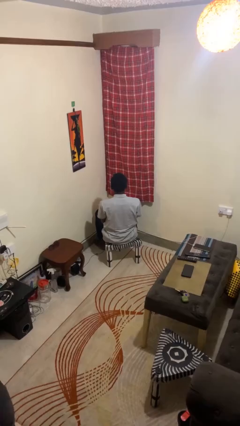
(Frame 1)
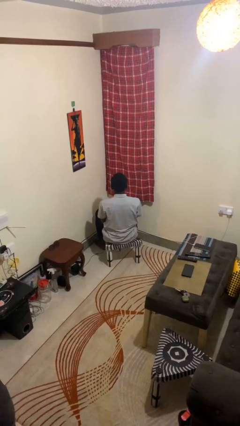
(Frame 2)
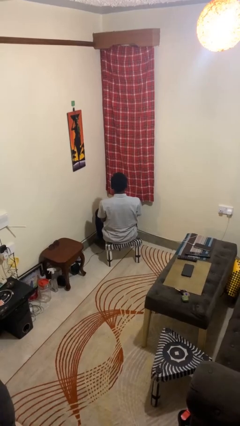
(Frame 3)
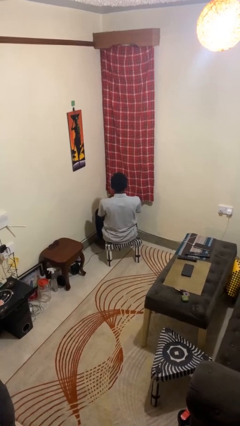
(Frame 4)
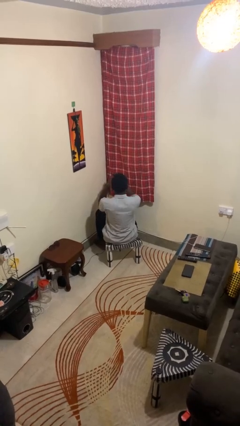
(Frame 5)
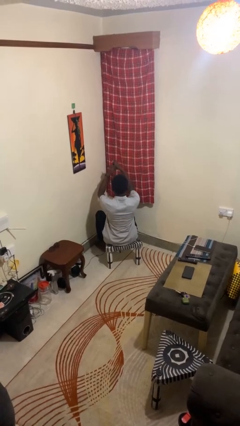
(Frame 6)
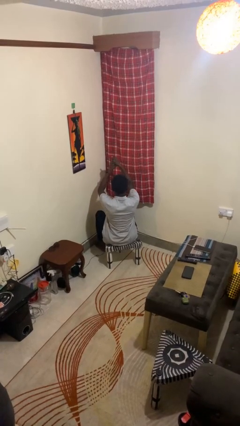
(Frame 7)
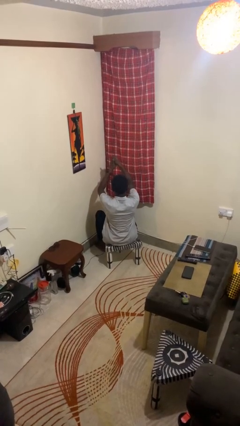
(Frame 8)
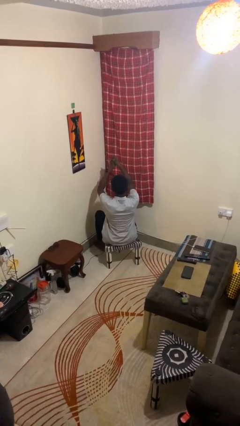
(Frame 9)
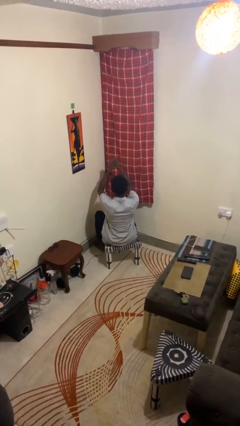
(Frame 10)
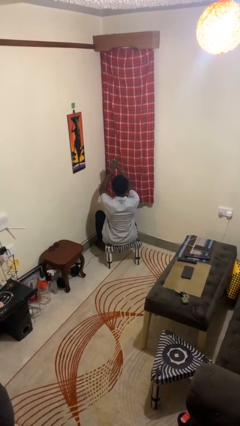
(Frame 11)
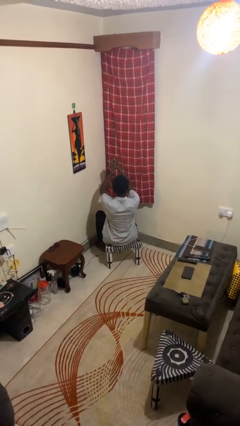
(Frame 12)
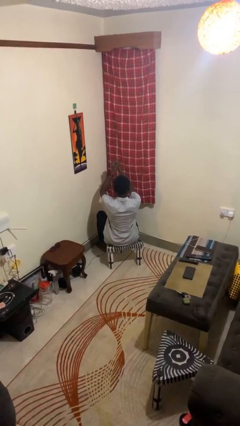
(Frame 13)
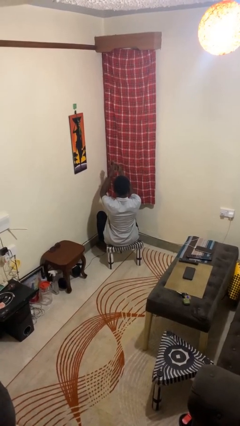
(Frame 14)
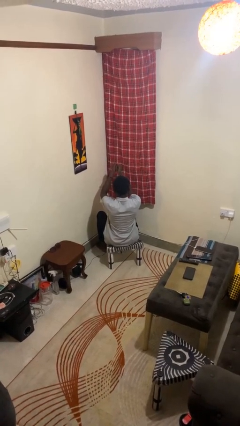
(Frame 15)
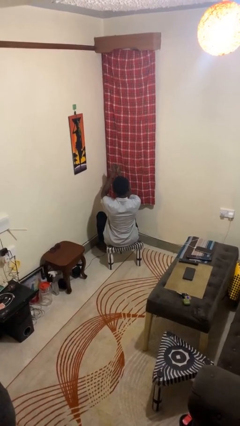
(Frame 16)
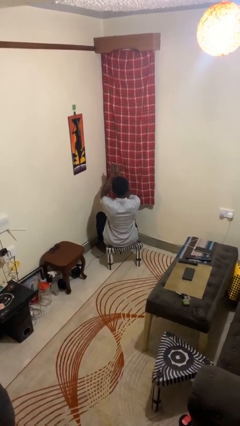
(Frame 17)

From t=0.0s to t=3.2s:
person cracks knuckles

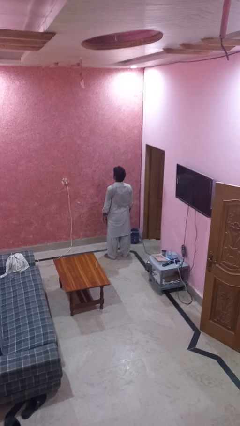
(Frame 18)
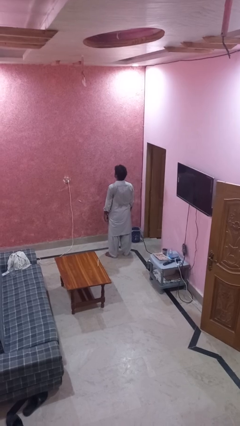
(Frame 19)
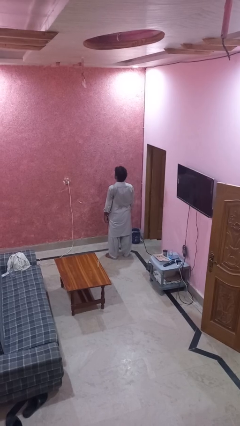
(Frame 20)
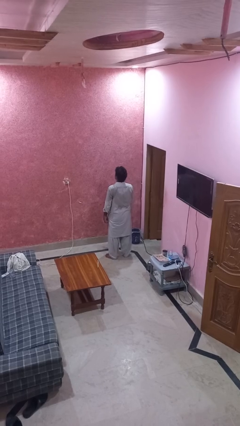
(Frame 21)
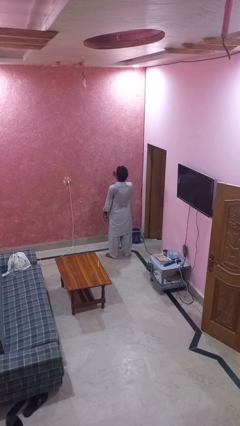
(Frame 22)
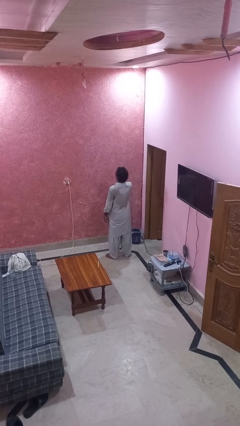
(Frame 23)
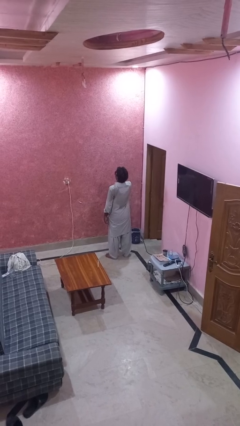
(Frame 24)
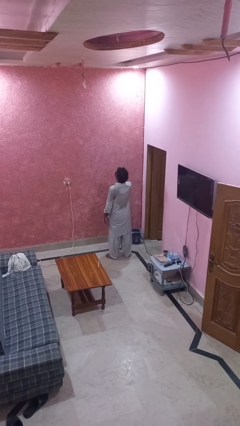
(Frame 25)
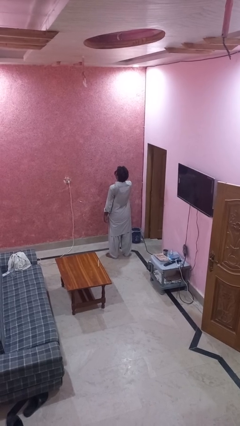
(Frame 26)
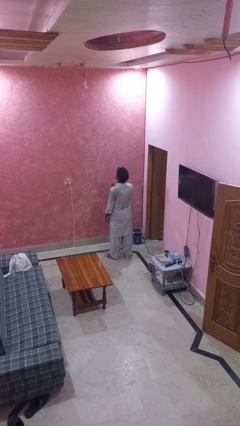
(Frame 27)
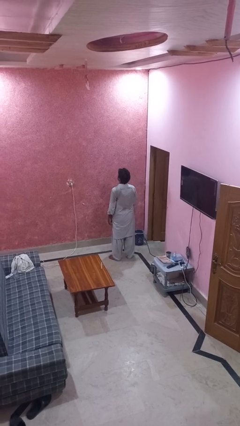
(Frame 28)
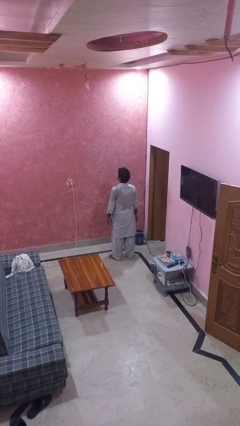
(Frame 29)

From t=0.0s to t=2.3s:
person yawns

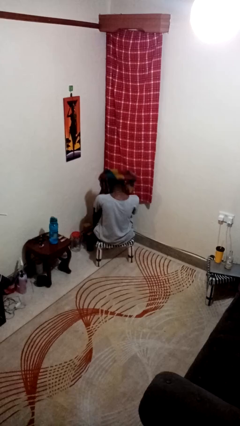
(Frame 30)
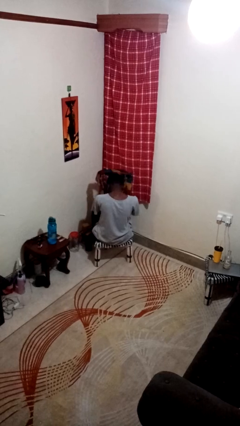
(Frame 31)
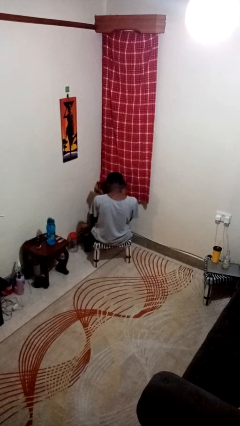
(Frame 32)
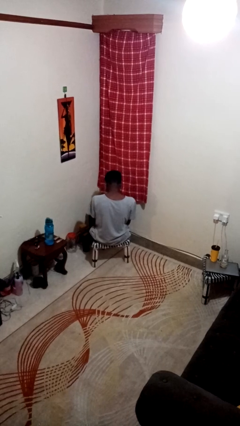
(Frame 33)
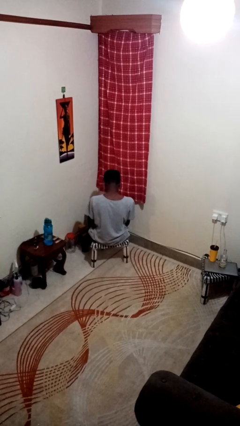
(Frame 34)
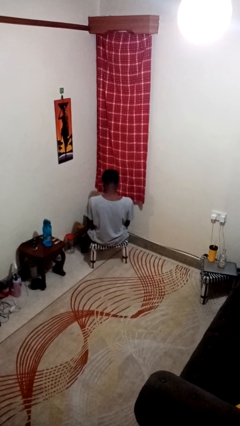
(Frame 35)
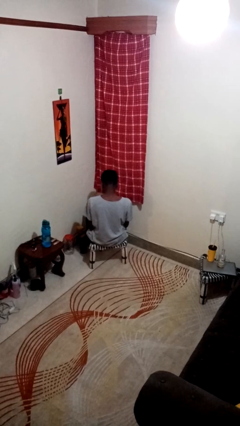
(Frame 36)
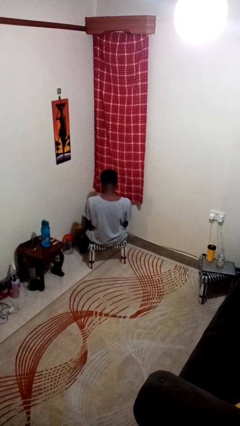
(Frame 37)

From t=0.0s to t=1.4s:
person takes off scarf

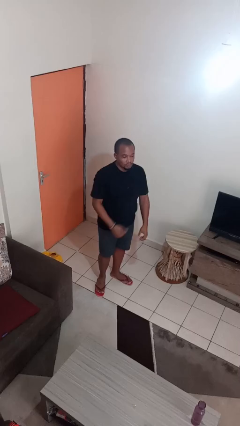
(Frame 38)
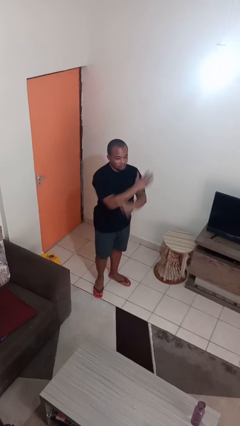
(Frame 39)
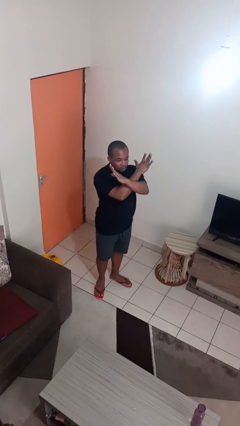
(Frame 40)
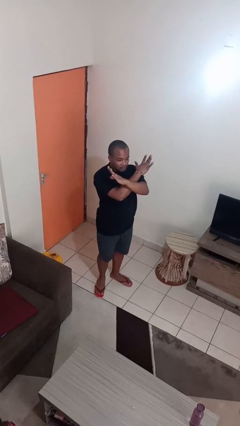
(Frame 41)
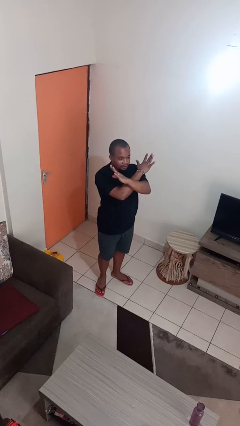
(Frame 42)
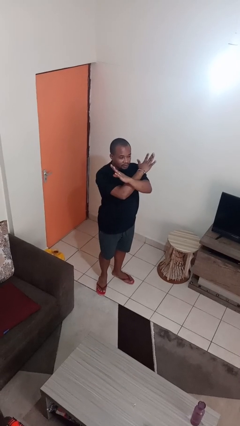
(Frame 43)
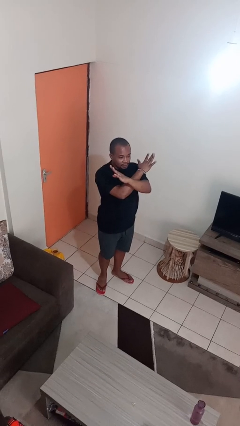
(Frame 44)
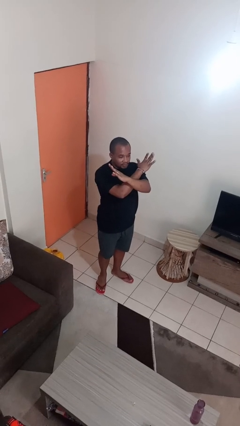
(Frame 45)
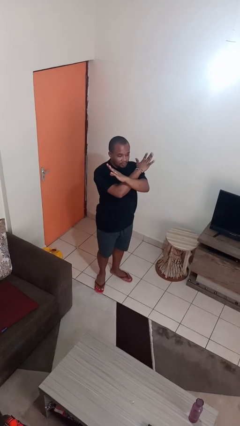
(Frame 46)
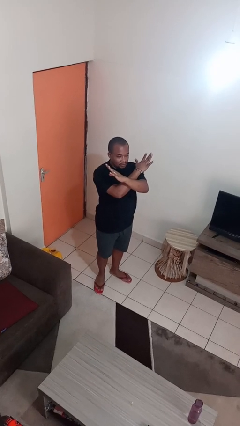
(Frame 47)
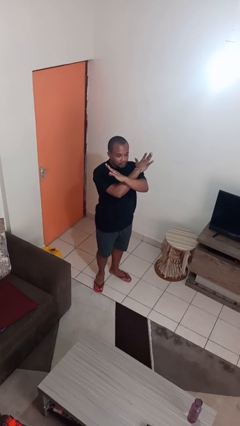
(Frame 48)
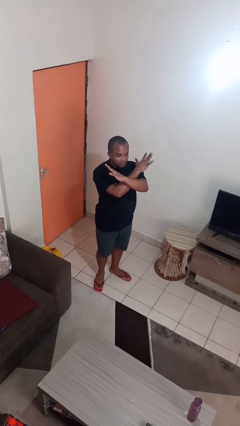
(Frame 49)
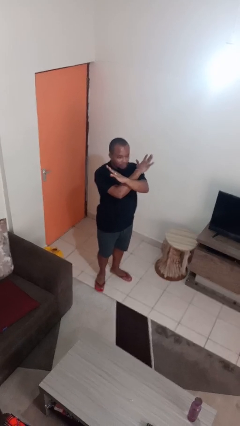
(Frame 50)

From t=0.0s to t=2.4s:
person gestures arms x

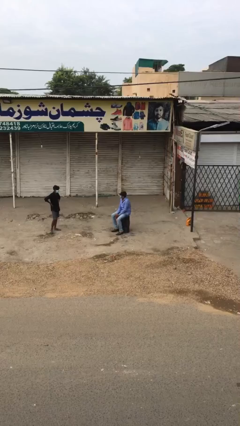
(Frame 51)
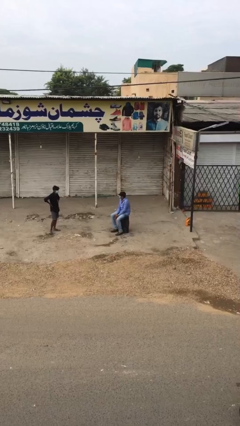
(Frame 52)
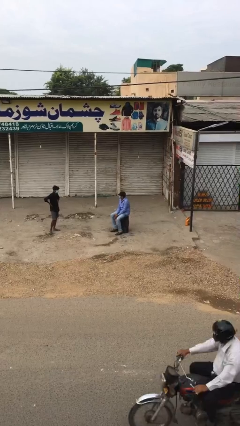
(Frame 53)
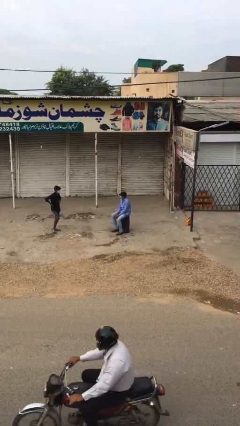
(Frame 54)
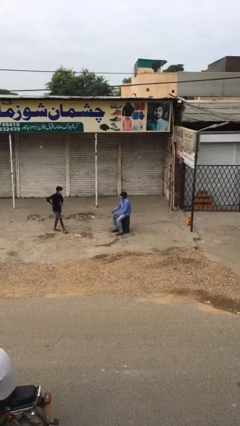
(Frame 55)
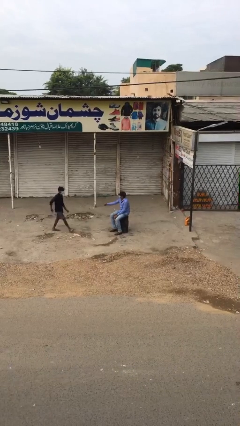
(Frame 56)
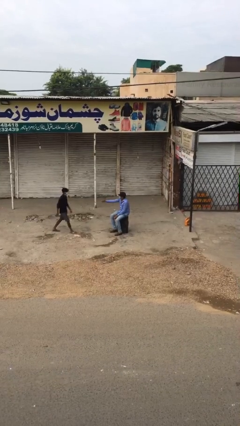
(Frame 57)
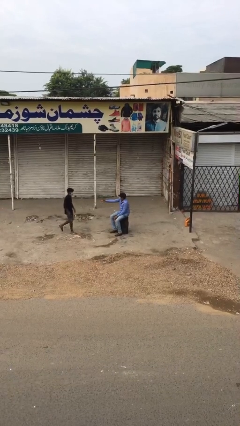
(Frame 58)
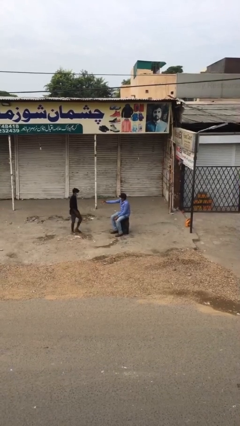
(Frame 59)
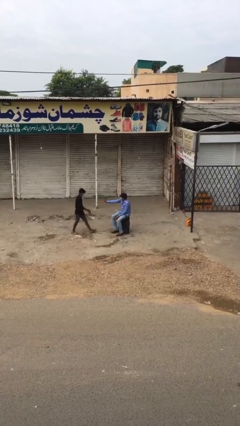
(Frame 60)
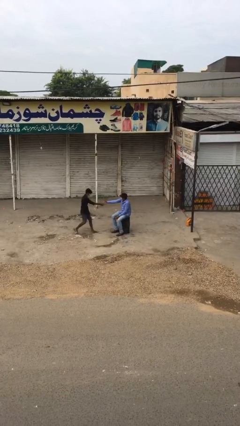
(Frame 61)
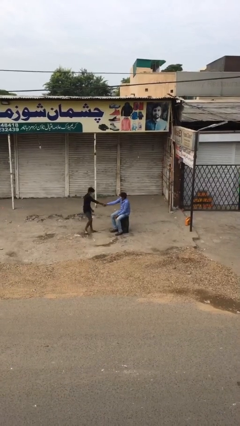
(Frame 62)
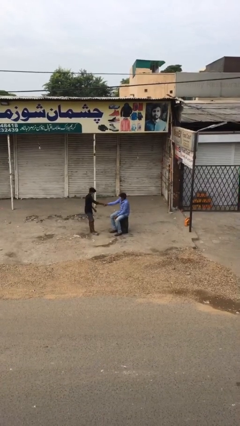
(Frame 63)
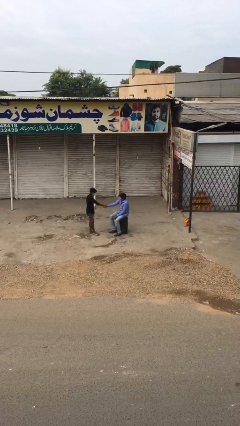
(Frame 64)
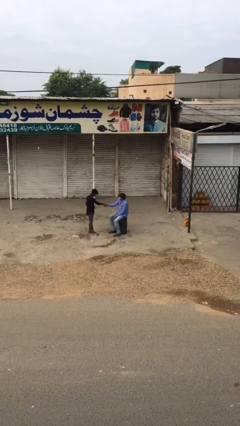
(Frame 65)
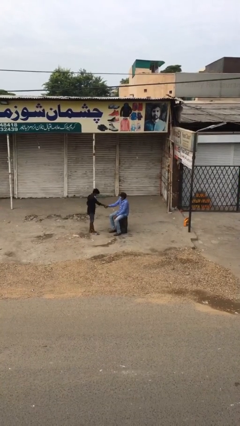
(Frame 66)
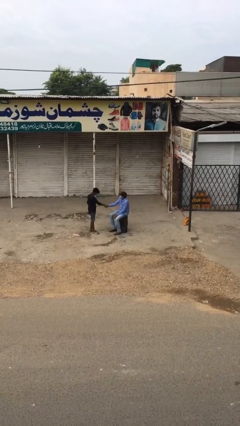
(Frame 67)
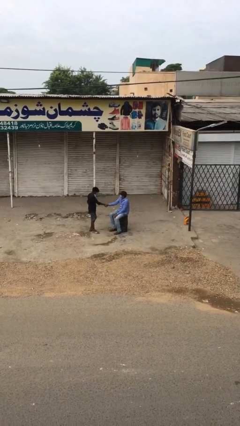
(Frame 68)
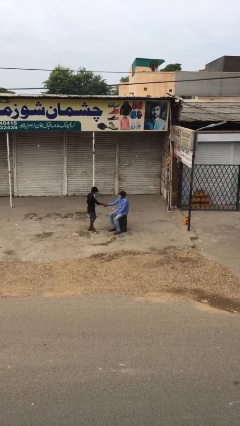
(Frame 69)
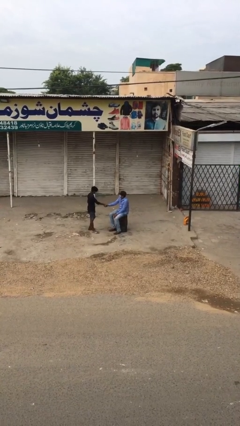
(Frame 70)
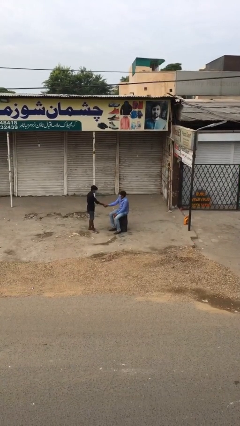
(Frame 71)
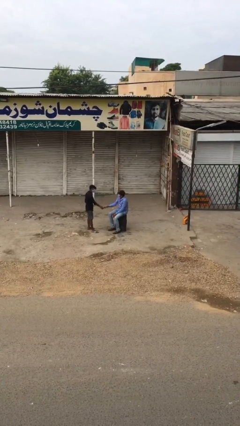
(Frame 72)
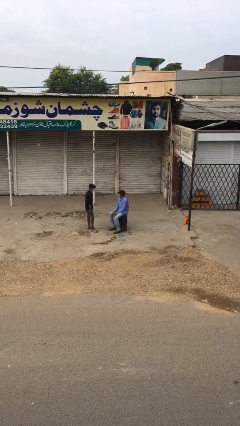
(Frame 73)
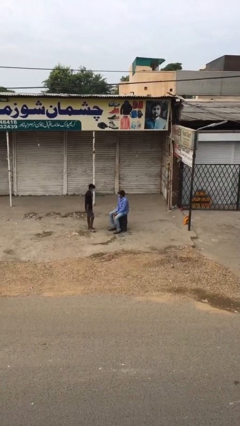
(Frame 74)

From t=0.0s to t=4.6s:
person shakes hand

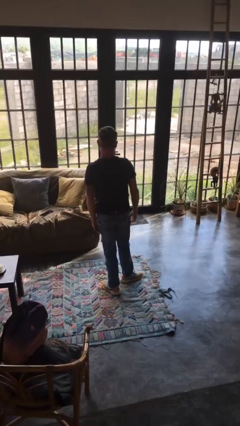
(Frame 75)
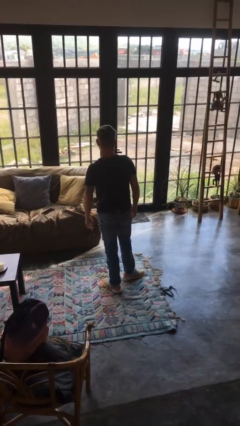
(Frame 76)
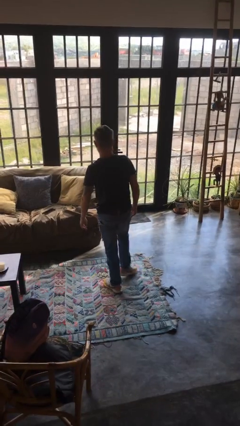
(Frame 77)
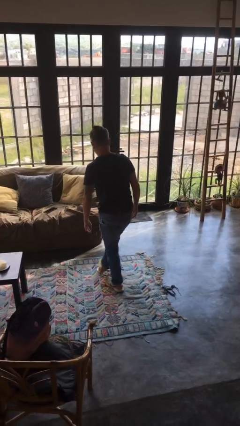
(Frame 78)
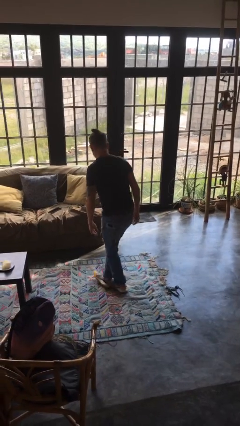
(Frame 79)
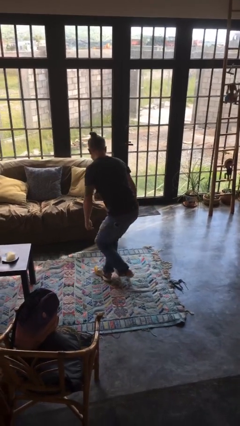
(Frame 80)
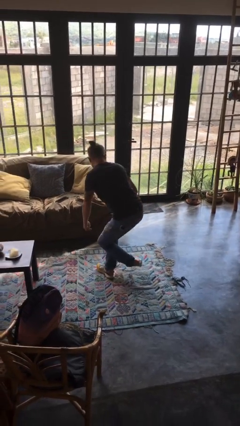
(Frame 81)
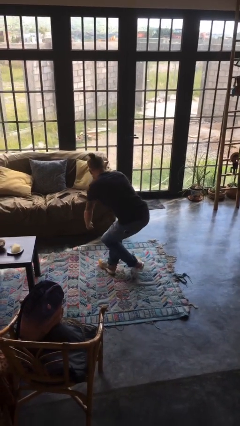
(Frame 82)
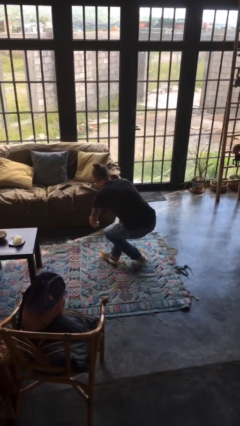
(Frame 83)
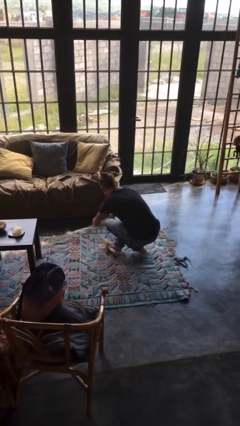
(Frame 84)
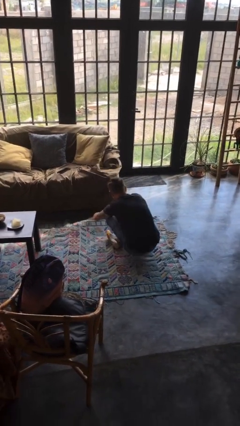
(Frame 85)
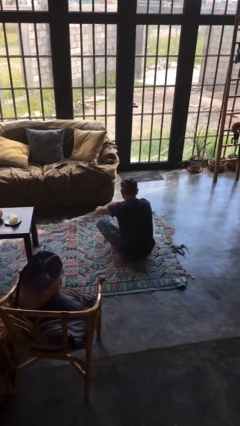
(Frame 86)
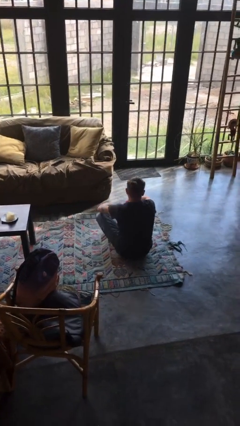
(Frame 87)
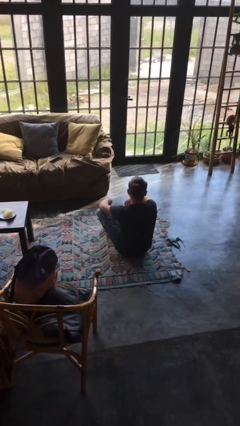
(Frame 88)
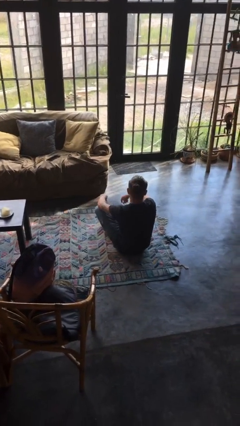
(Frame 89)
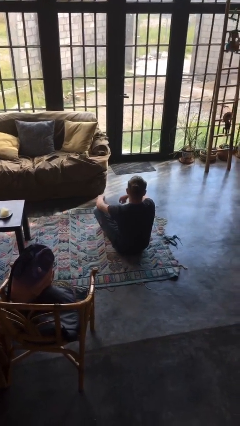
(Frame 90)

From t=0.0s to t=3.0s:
person sits crisscross

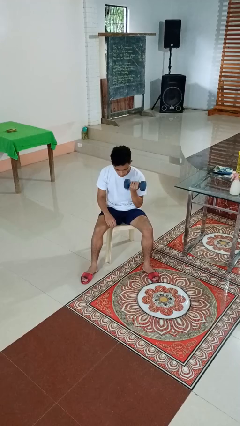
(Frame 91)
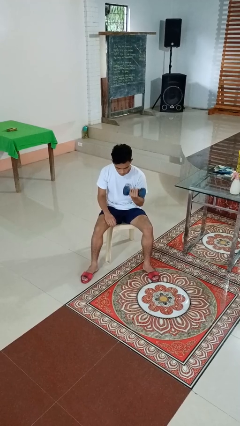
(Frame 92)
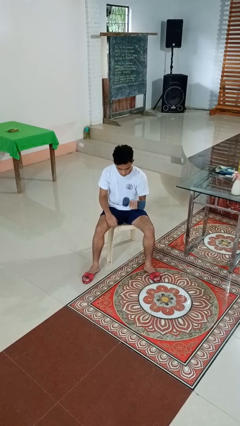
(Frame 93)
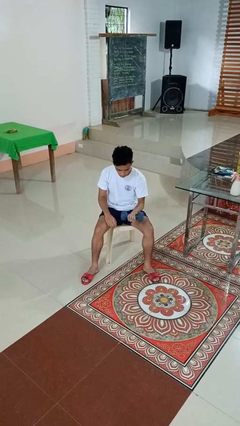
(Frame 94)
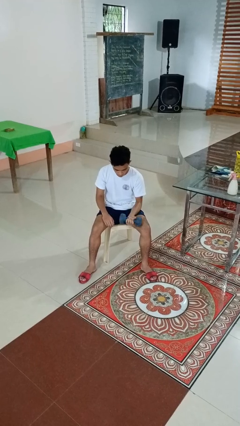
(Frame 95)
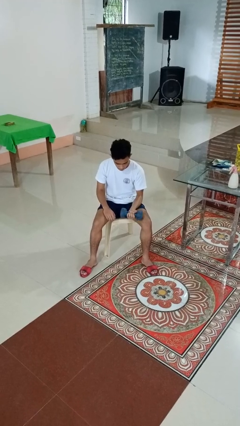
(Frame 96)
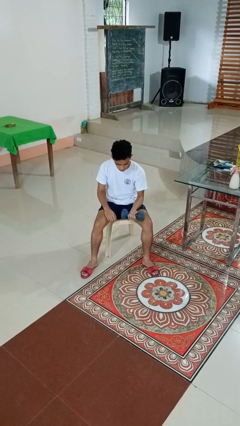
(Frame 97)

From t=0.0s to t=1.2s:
person lifts dumbbells
